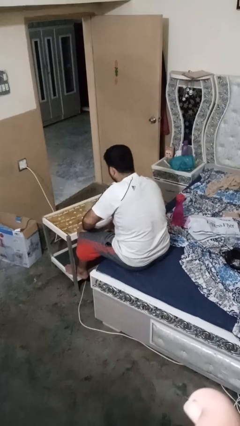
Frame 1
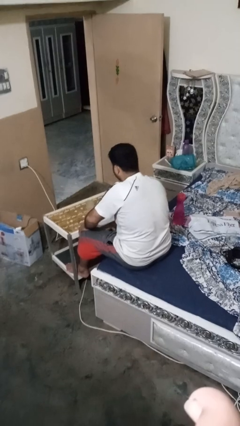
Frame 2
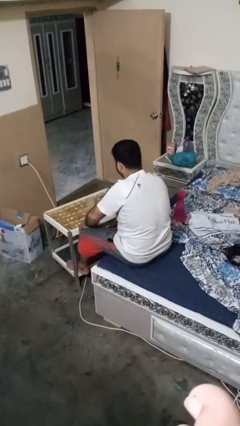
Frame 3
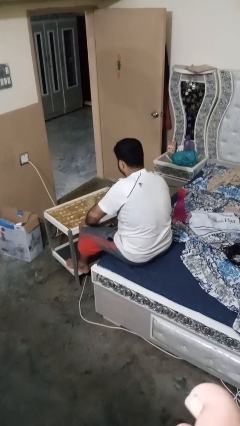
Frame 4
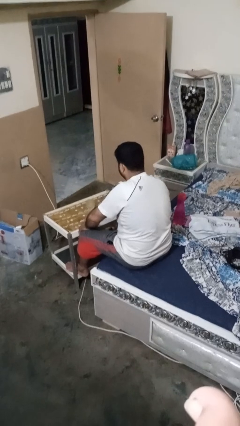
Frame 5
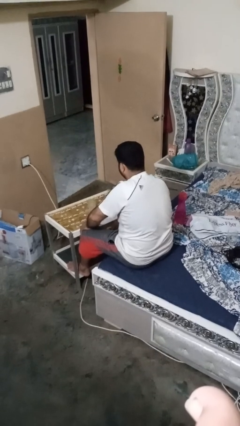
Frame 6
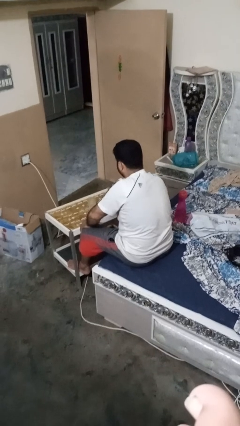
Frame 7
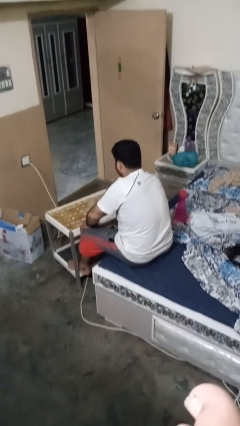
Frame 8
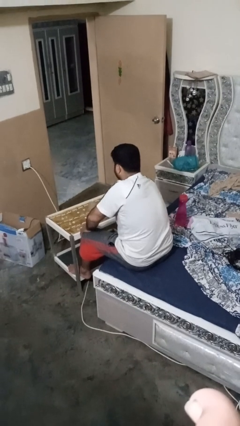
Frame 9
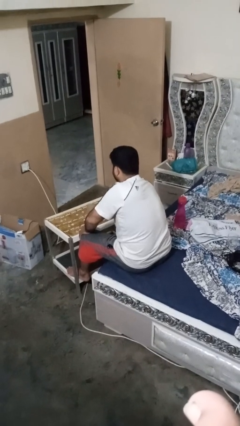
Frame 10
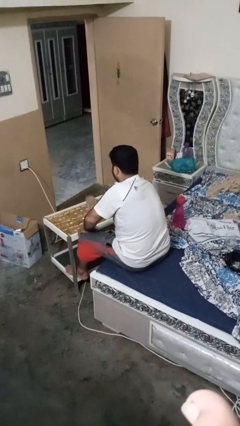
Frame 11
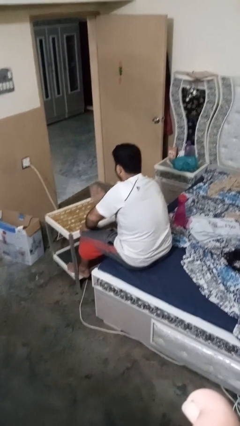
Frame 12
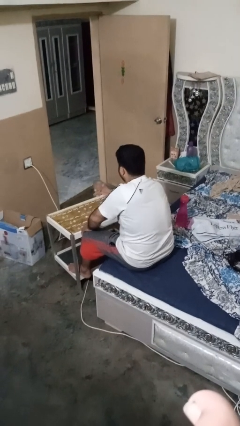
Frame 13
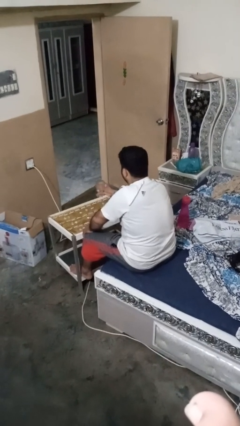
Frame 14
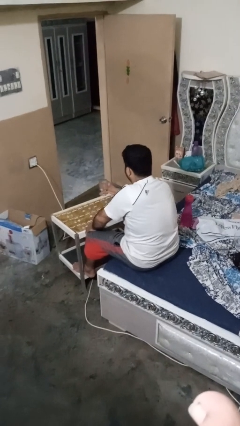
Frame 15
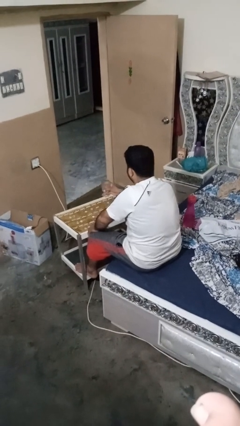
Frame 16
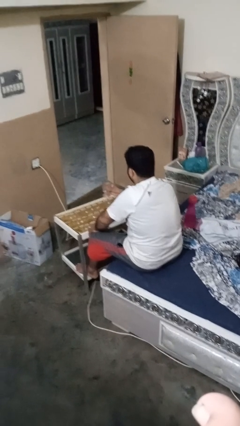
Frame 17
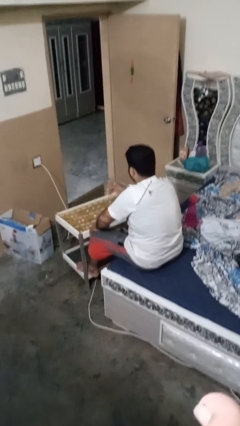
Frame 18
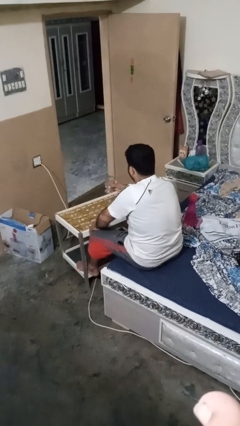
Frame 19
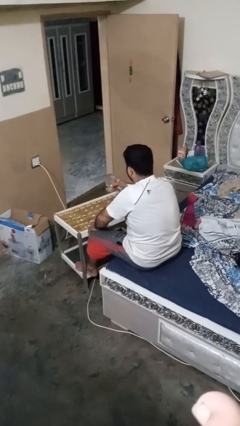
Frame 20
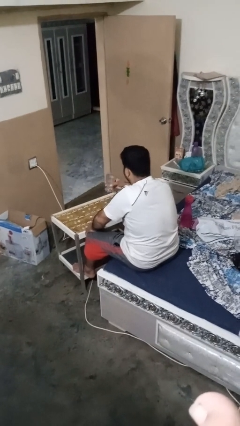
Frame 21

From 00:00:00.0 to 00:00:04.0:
person picks up object from table

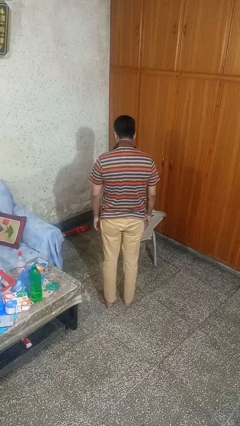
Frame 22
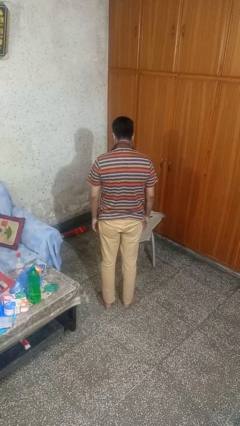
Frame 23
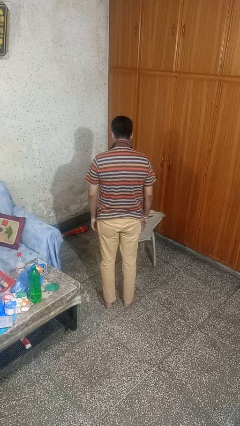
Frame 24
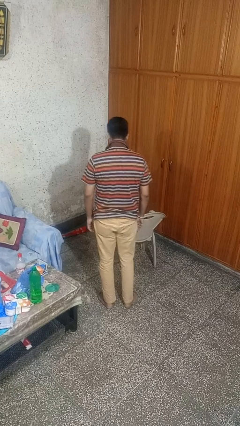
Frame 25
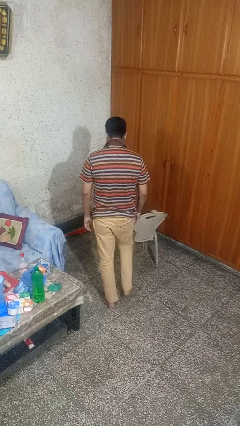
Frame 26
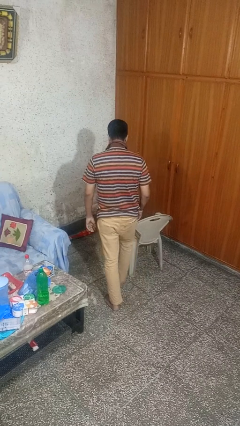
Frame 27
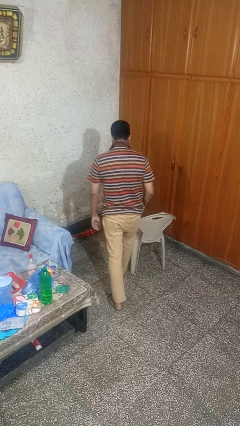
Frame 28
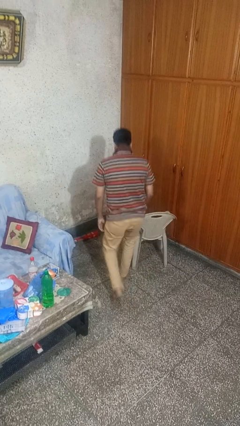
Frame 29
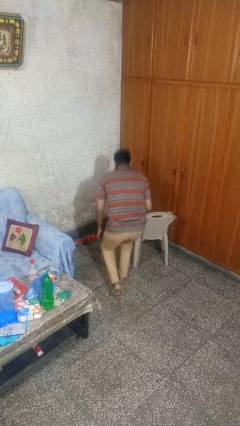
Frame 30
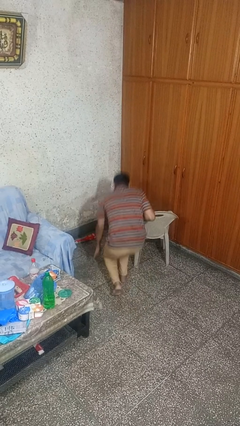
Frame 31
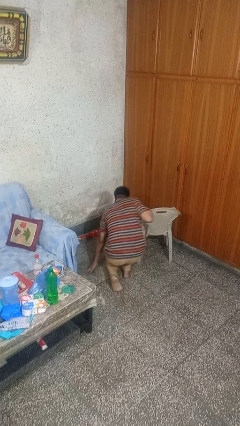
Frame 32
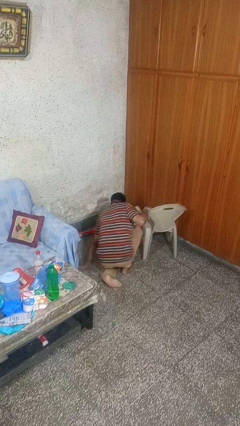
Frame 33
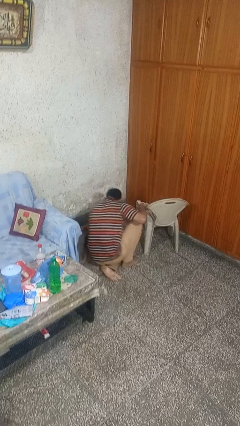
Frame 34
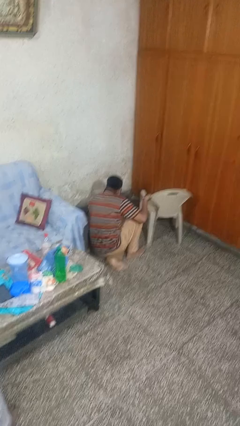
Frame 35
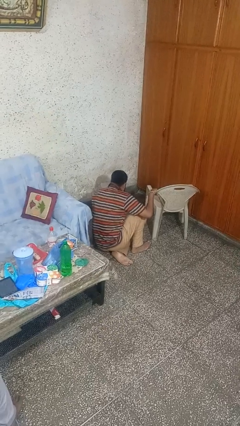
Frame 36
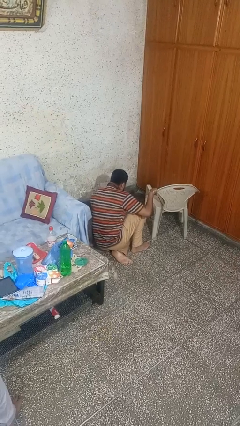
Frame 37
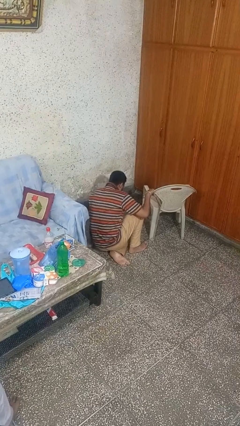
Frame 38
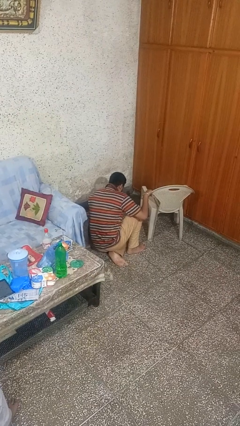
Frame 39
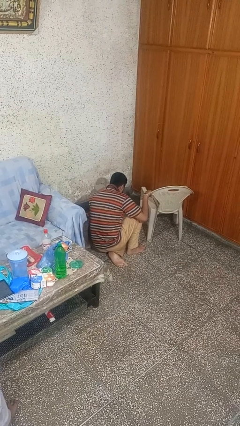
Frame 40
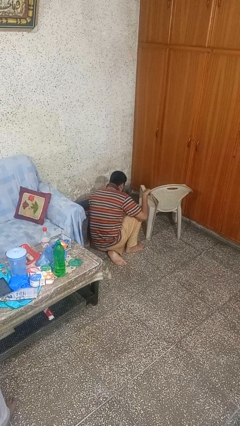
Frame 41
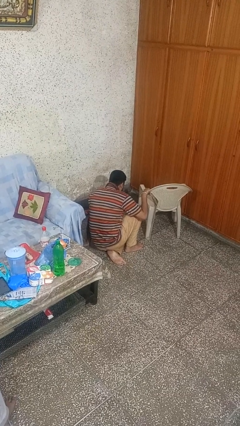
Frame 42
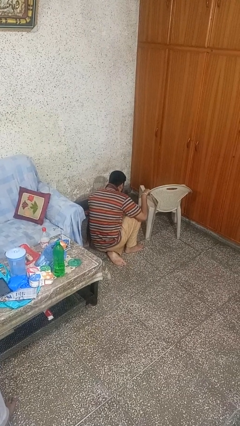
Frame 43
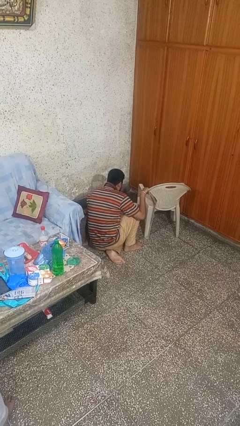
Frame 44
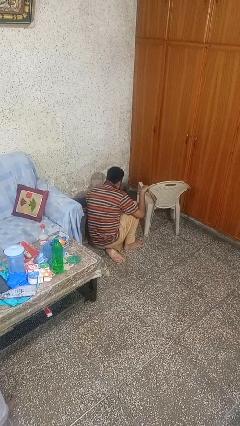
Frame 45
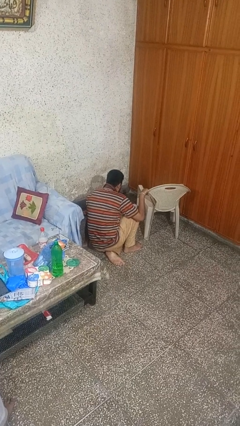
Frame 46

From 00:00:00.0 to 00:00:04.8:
person trips on object on floor

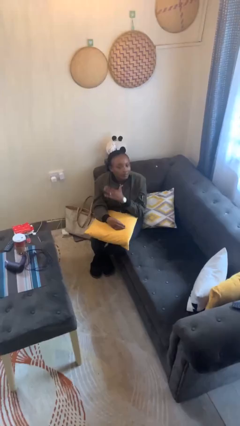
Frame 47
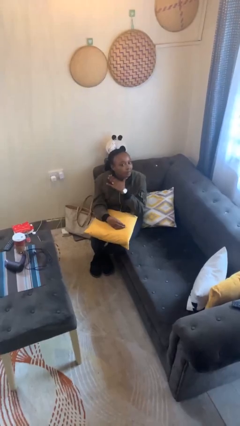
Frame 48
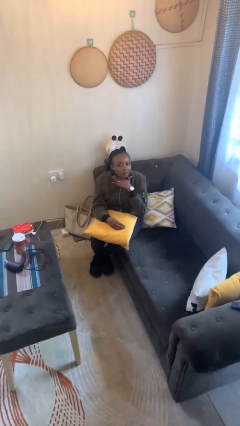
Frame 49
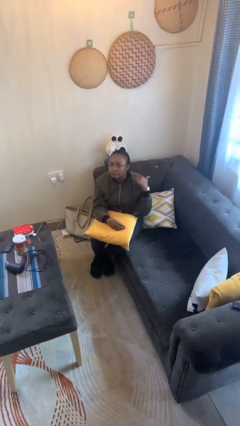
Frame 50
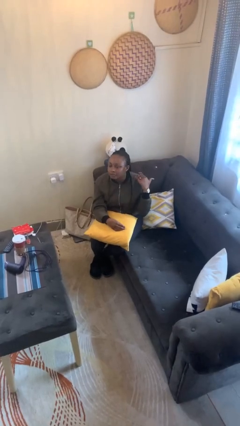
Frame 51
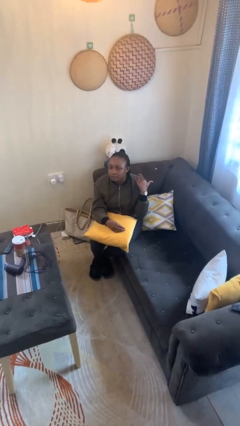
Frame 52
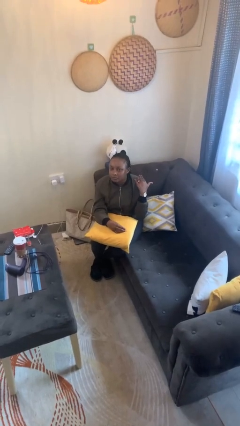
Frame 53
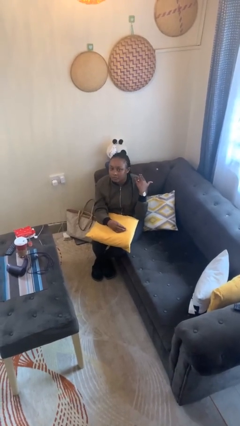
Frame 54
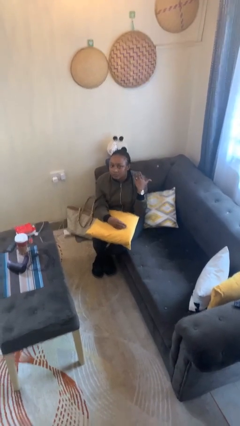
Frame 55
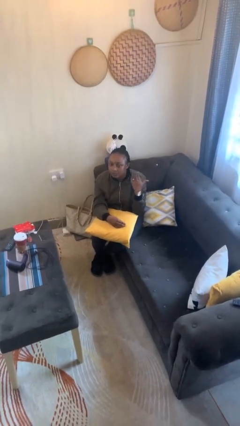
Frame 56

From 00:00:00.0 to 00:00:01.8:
person gestures cut

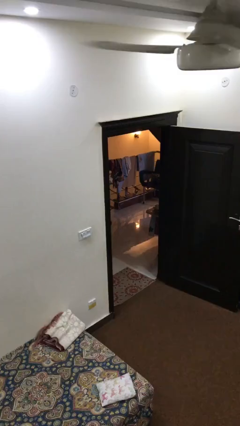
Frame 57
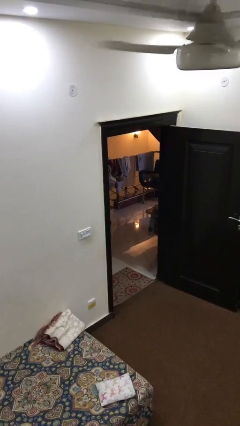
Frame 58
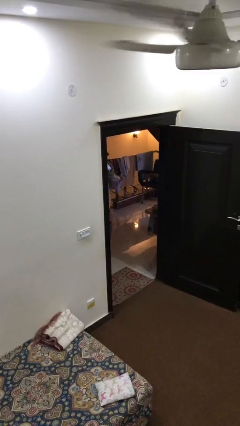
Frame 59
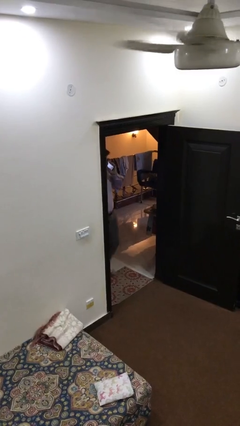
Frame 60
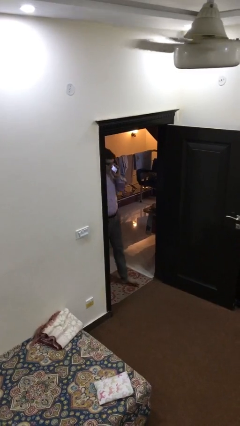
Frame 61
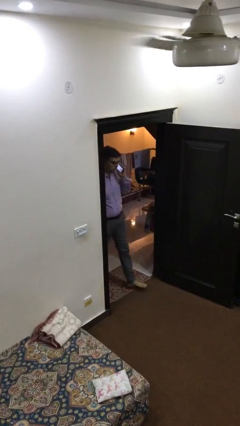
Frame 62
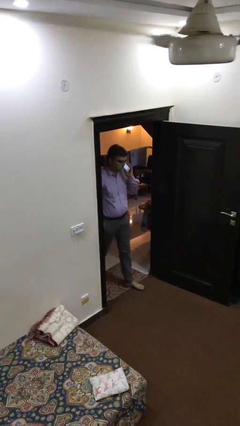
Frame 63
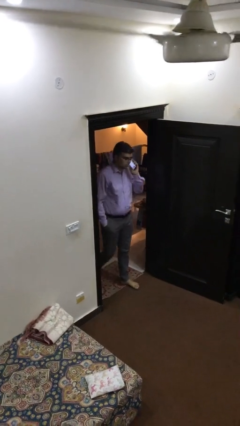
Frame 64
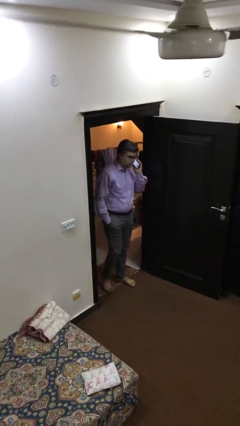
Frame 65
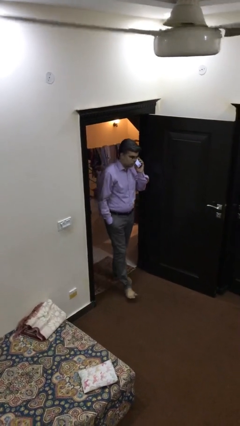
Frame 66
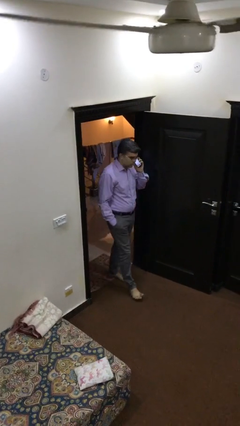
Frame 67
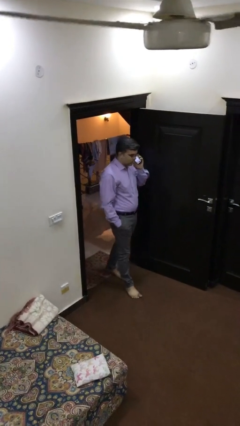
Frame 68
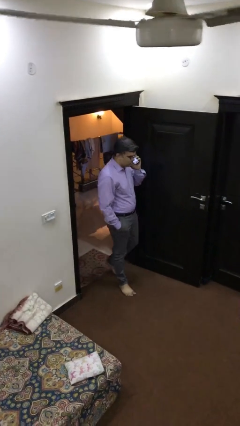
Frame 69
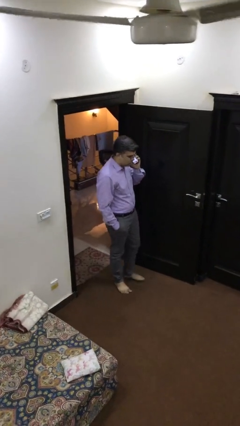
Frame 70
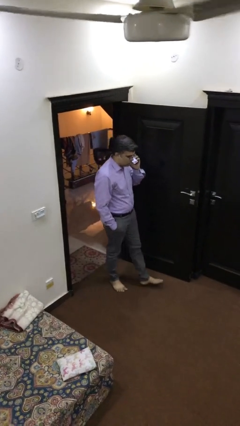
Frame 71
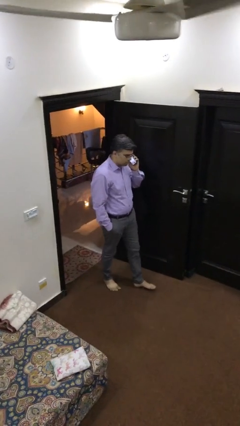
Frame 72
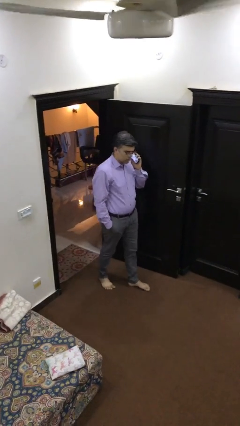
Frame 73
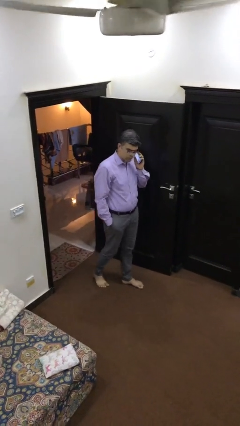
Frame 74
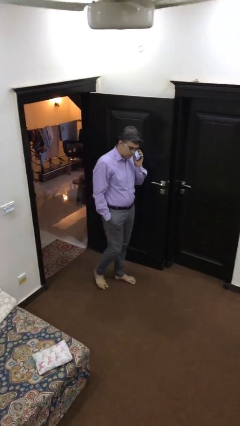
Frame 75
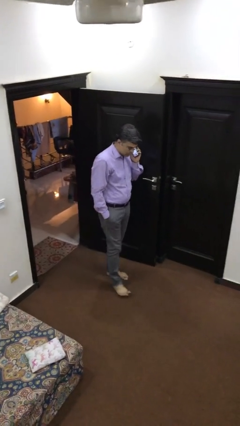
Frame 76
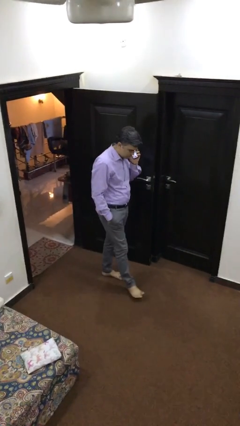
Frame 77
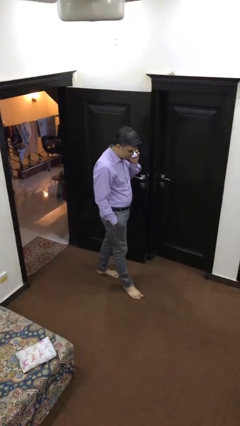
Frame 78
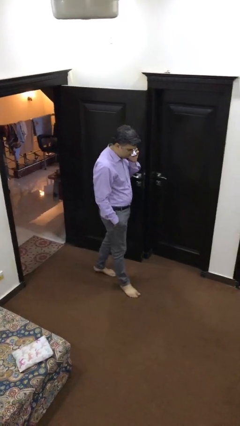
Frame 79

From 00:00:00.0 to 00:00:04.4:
person enters scene through structure

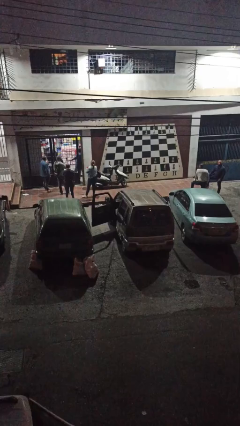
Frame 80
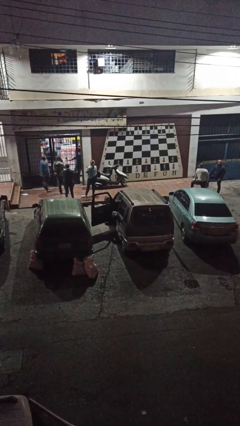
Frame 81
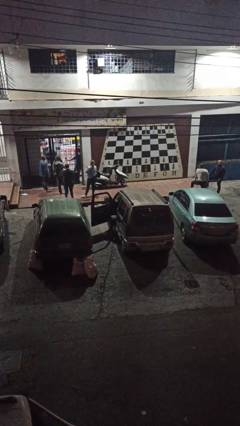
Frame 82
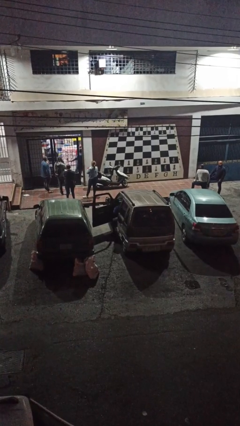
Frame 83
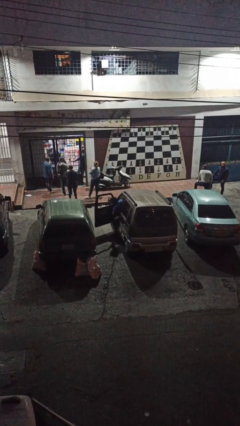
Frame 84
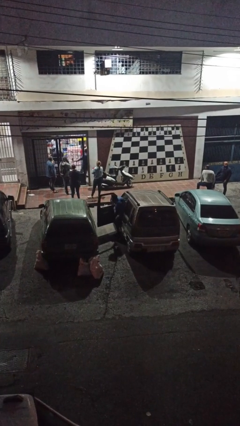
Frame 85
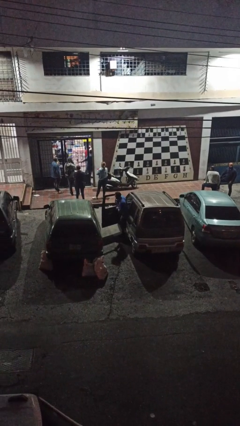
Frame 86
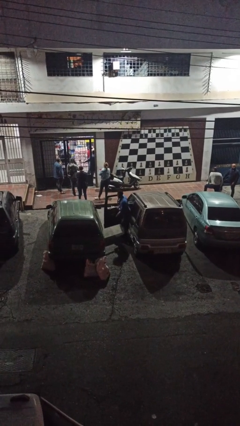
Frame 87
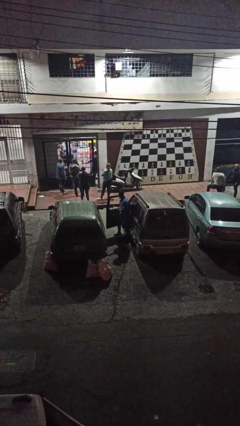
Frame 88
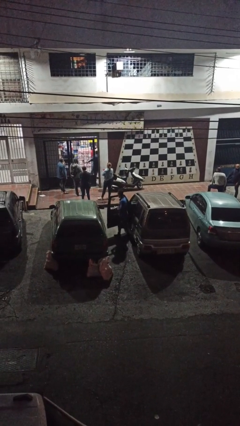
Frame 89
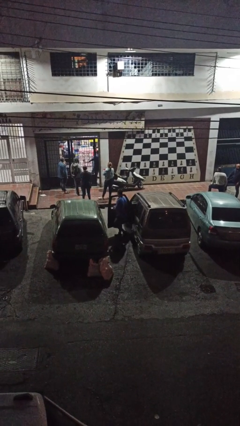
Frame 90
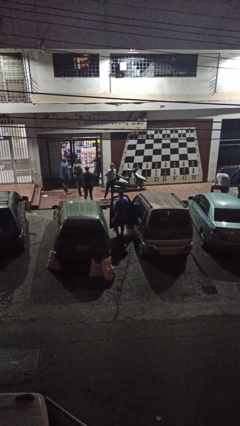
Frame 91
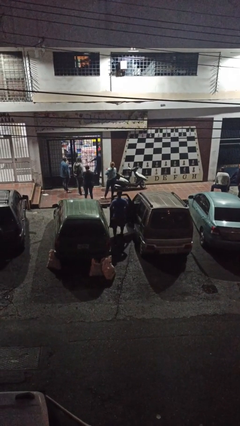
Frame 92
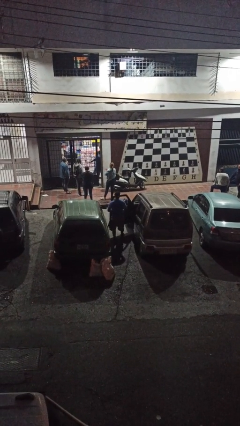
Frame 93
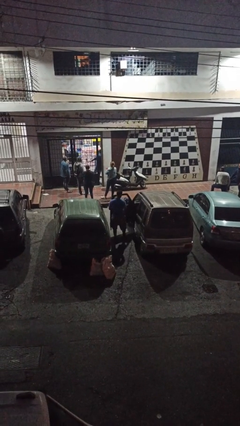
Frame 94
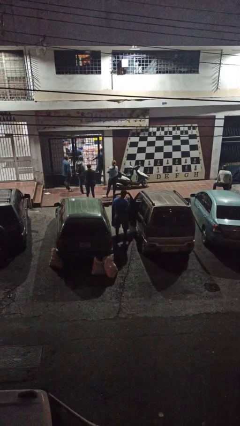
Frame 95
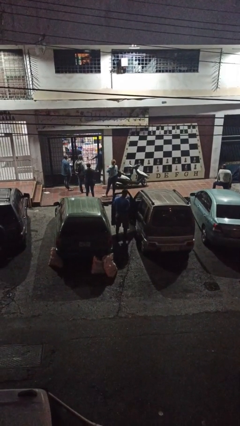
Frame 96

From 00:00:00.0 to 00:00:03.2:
person exits car
